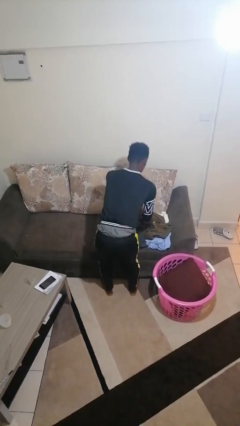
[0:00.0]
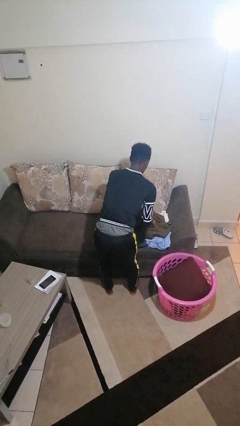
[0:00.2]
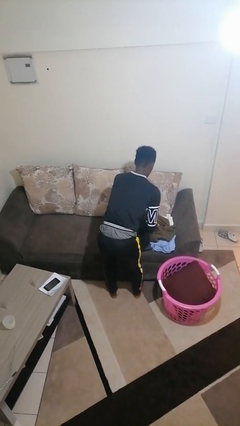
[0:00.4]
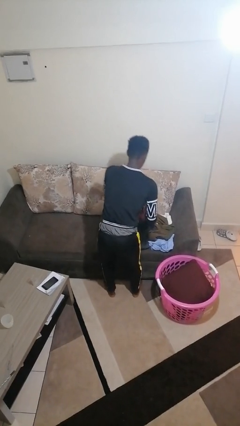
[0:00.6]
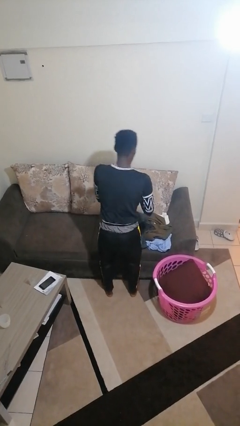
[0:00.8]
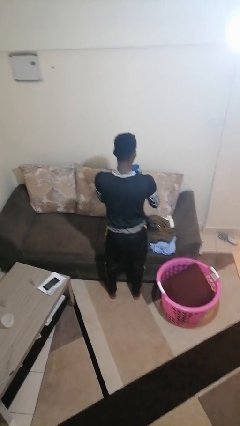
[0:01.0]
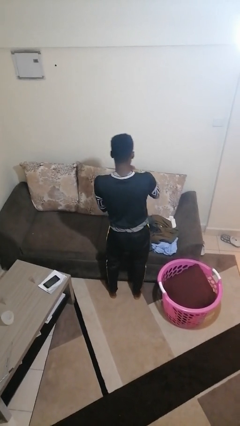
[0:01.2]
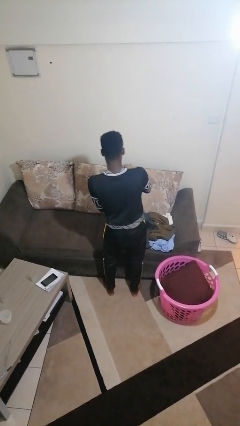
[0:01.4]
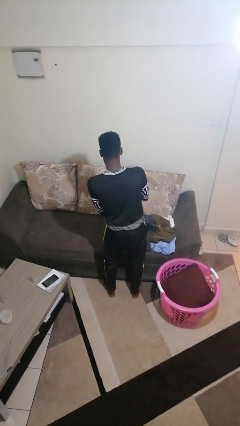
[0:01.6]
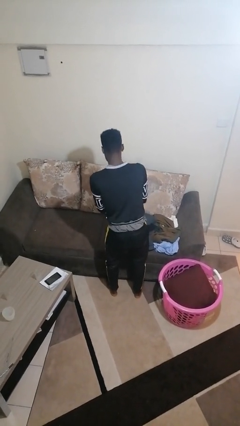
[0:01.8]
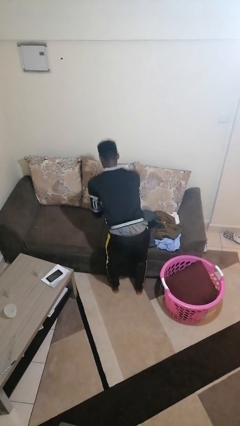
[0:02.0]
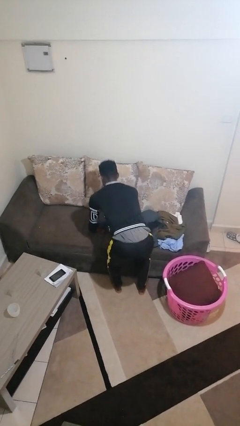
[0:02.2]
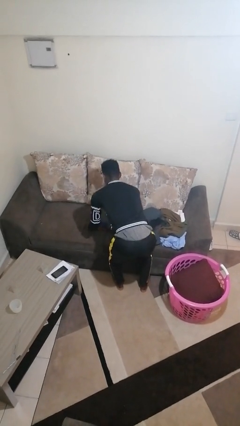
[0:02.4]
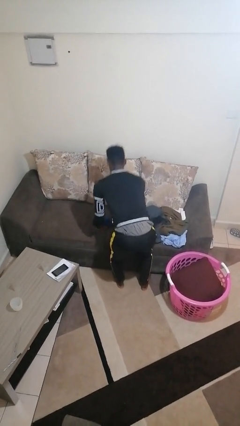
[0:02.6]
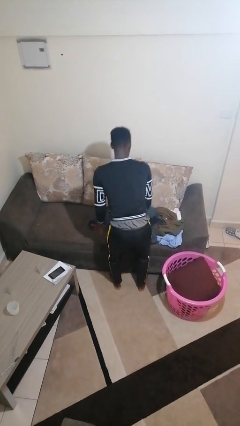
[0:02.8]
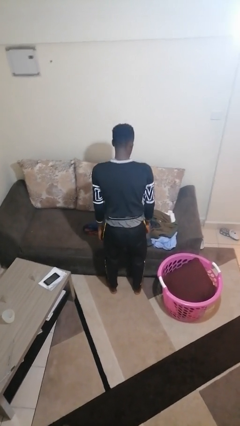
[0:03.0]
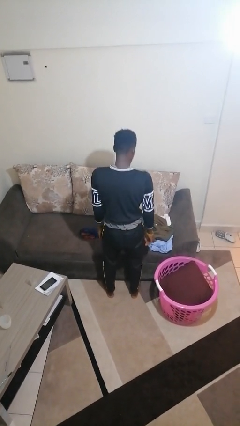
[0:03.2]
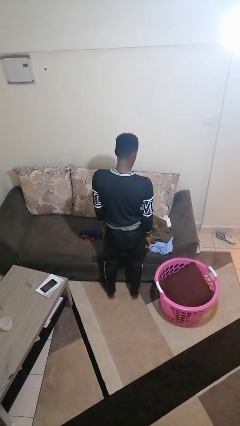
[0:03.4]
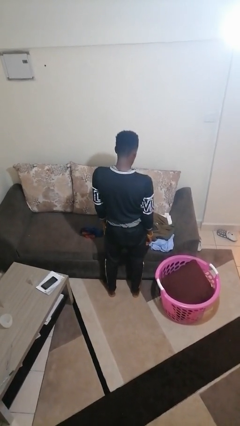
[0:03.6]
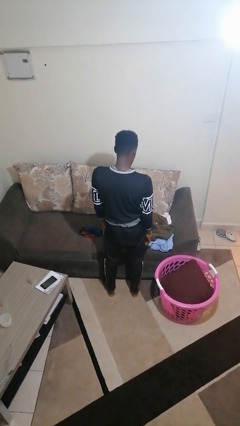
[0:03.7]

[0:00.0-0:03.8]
person folds socks

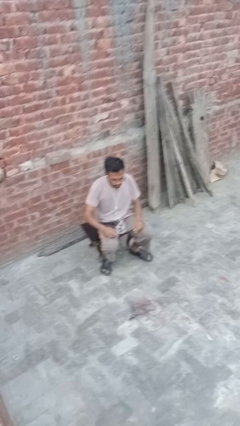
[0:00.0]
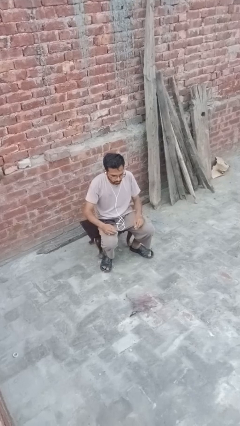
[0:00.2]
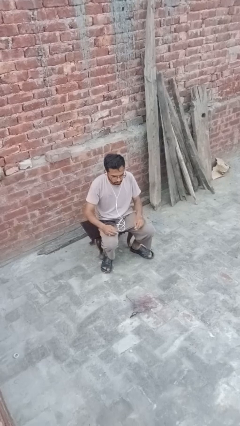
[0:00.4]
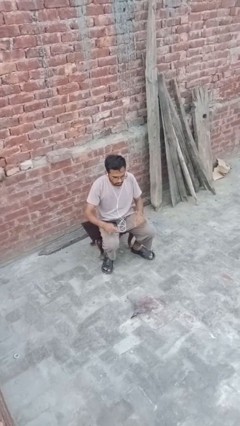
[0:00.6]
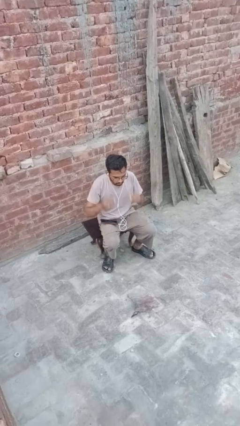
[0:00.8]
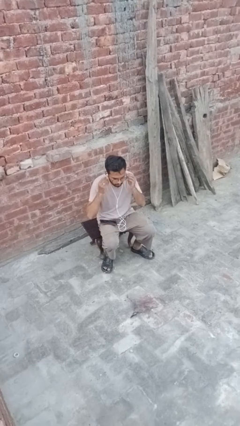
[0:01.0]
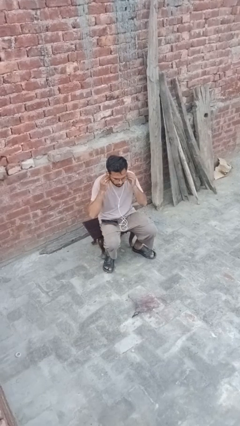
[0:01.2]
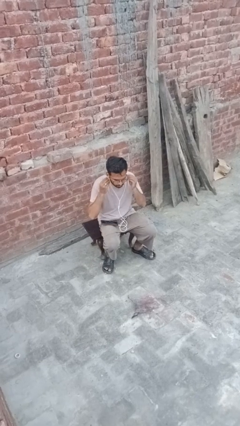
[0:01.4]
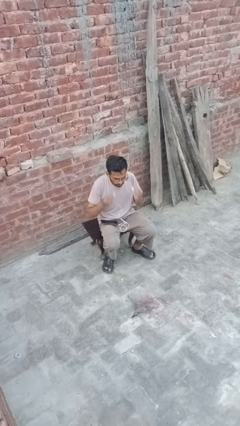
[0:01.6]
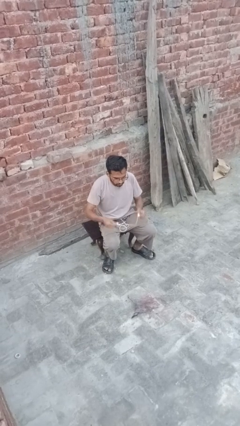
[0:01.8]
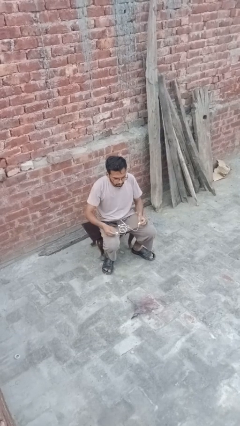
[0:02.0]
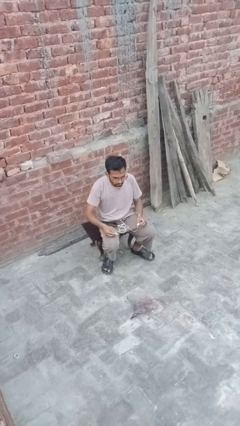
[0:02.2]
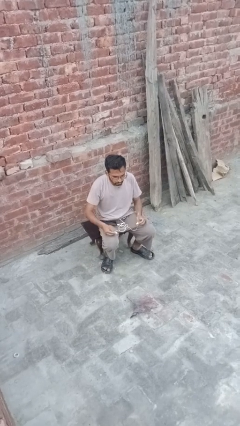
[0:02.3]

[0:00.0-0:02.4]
person takes off headphones

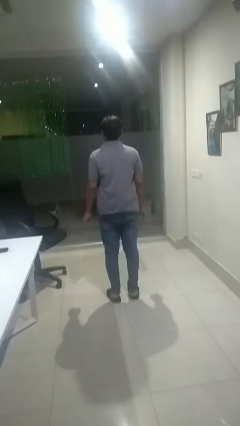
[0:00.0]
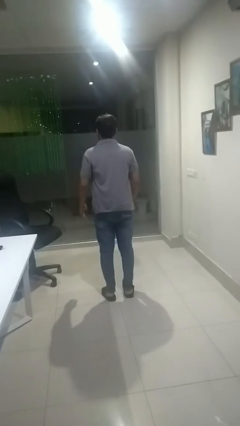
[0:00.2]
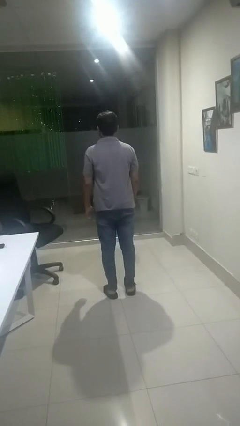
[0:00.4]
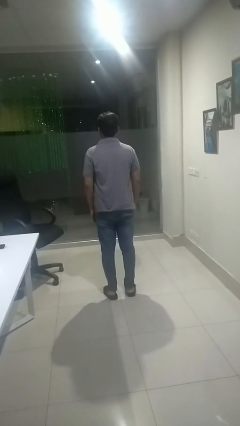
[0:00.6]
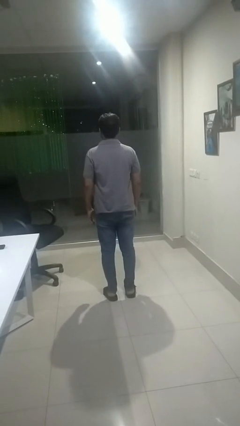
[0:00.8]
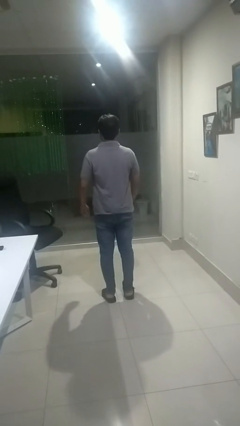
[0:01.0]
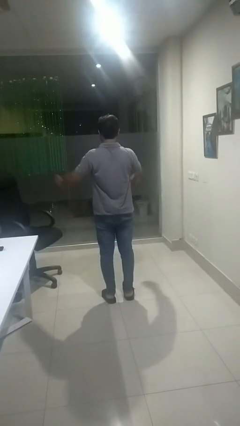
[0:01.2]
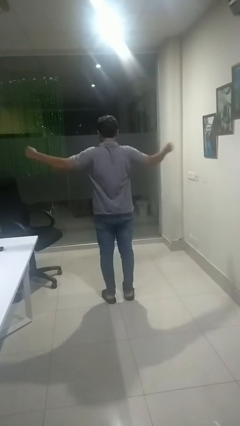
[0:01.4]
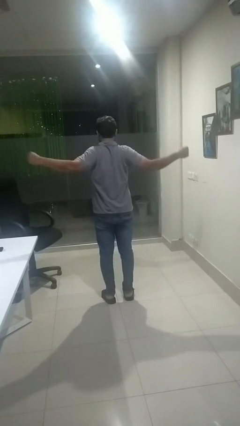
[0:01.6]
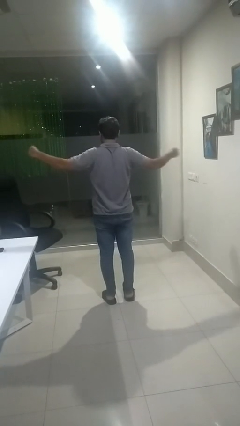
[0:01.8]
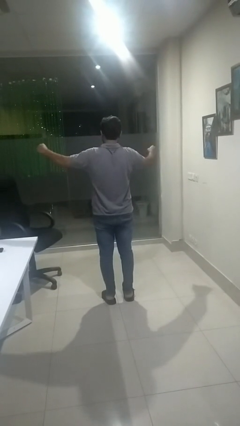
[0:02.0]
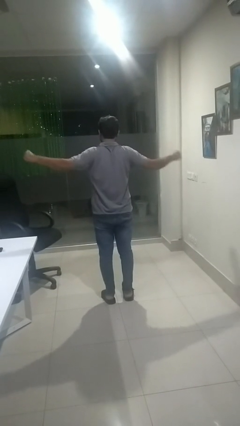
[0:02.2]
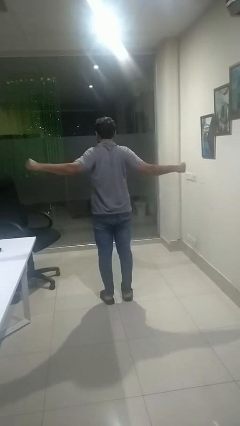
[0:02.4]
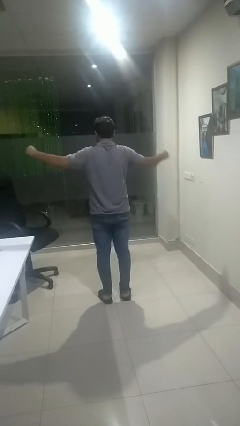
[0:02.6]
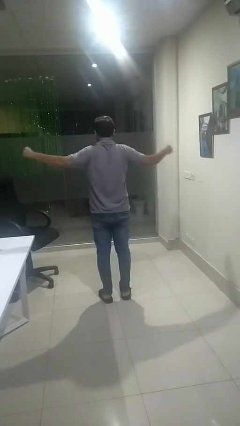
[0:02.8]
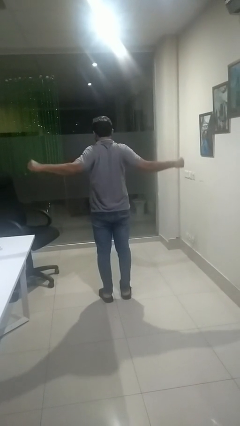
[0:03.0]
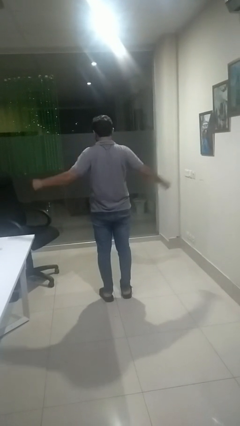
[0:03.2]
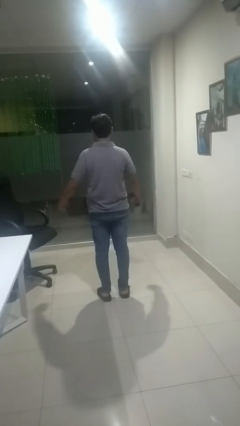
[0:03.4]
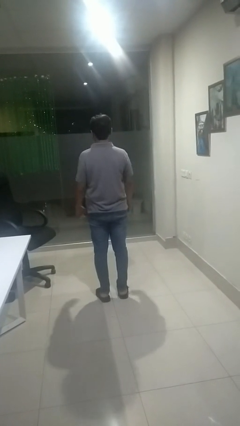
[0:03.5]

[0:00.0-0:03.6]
person stretches arms to side

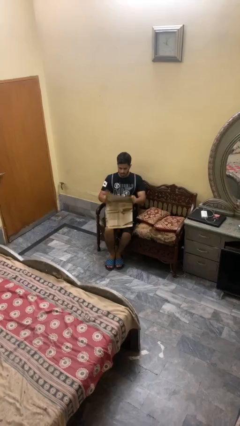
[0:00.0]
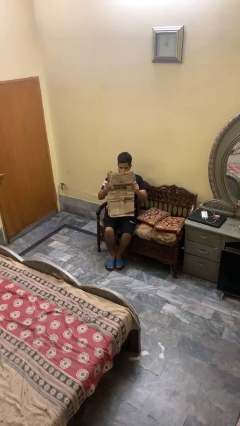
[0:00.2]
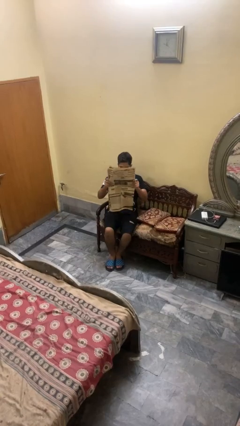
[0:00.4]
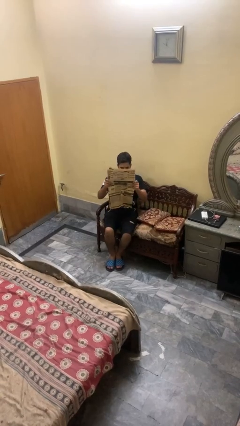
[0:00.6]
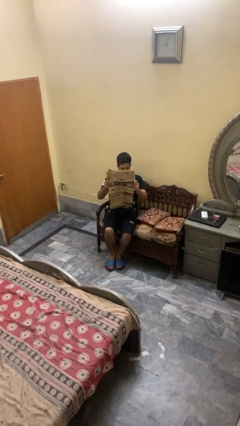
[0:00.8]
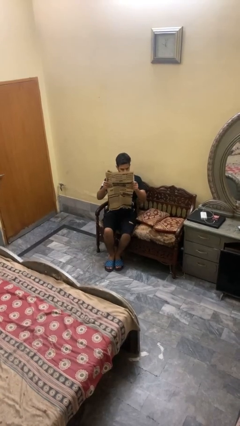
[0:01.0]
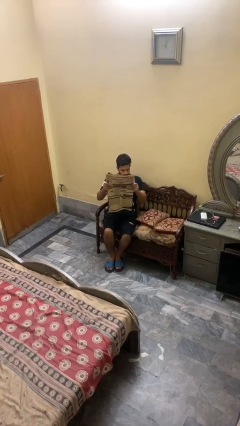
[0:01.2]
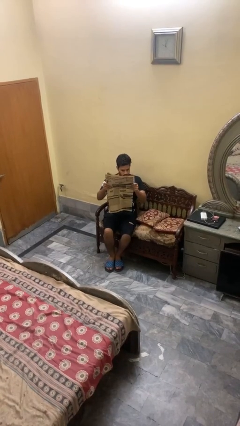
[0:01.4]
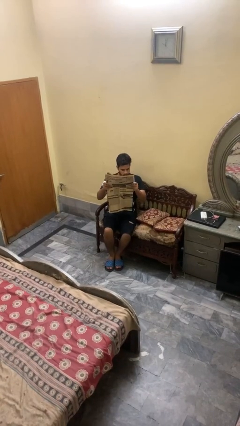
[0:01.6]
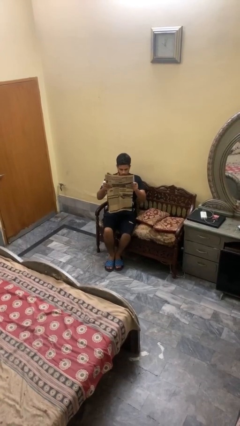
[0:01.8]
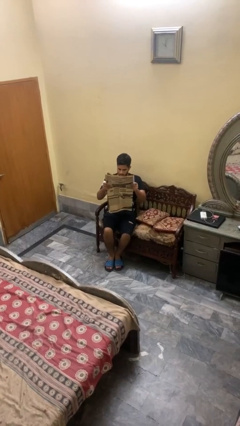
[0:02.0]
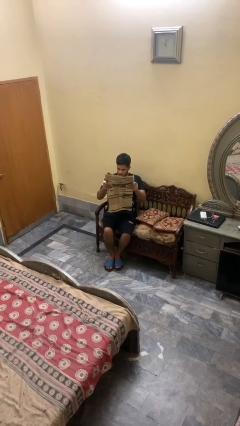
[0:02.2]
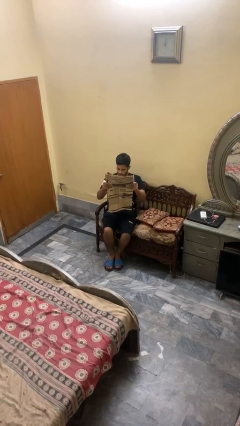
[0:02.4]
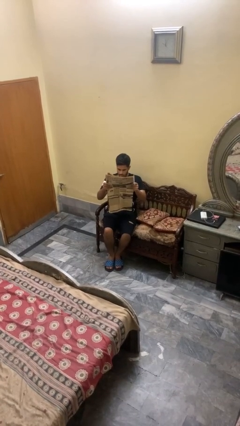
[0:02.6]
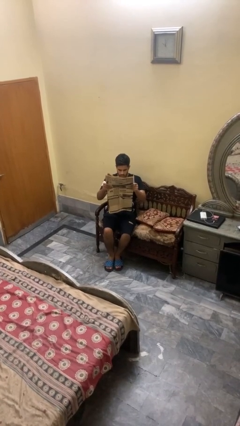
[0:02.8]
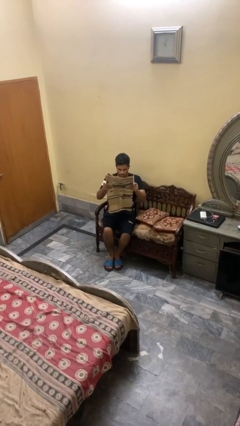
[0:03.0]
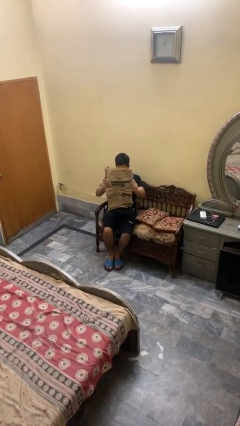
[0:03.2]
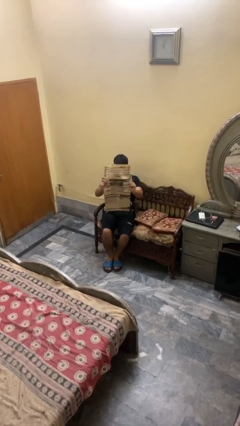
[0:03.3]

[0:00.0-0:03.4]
person reads newspaper

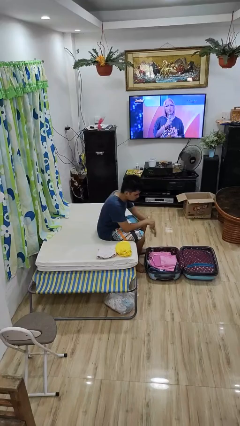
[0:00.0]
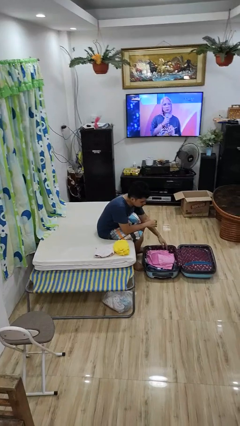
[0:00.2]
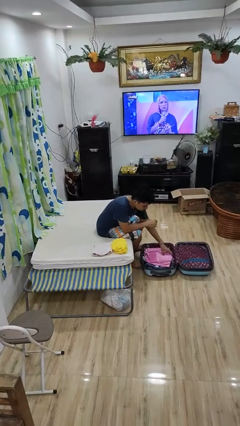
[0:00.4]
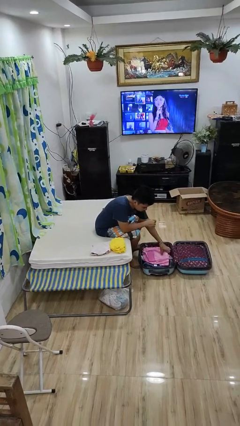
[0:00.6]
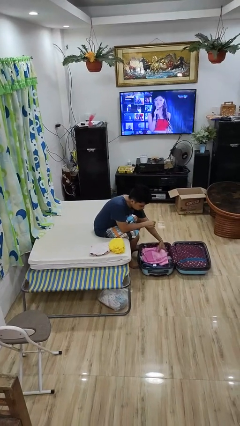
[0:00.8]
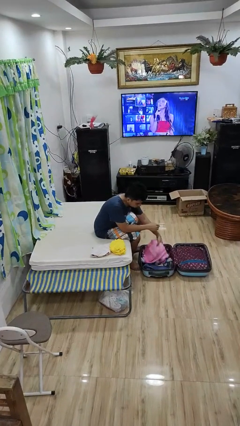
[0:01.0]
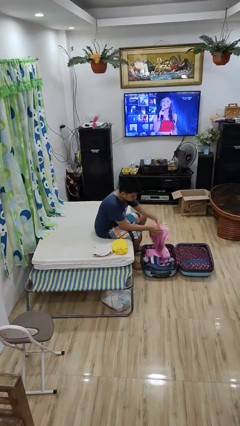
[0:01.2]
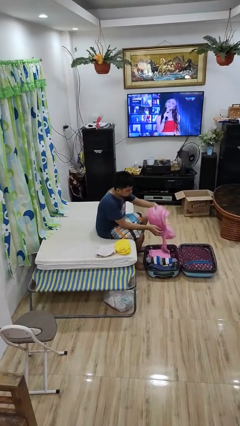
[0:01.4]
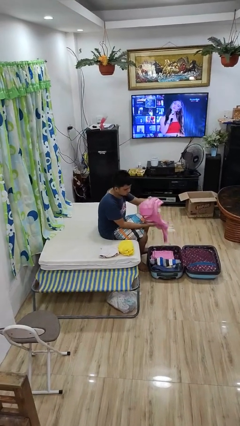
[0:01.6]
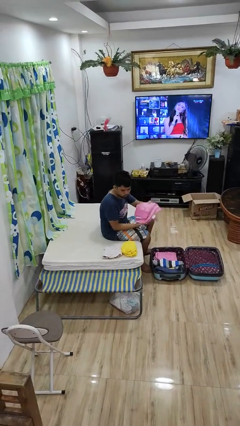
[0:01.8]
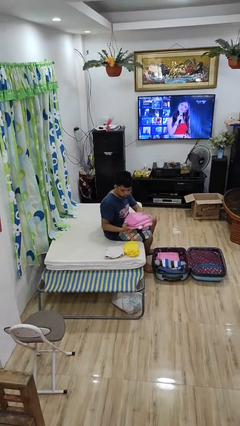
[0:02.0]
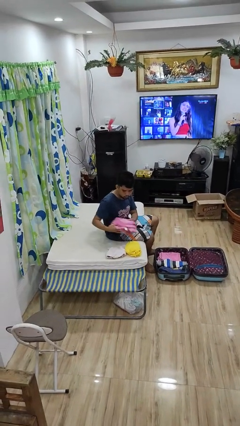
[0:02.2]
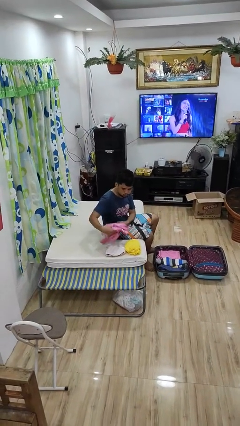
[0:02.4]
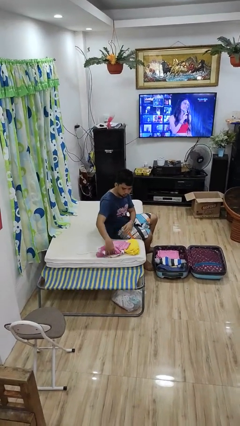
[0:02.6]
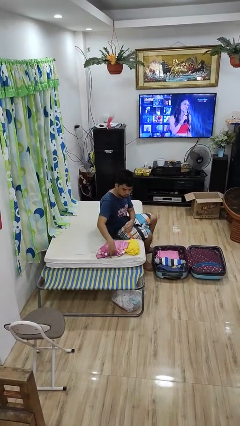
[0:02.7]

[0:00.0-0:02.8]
person unloads clothes from suitcase

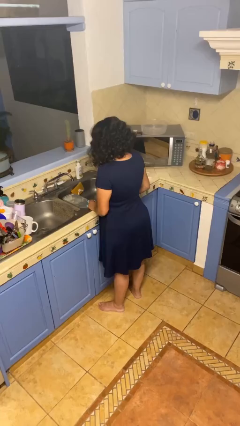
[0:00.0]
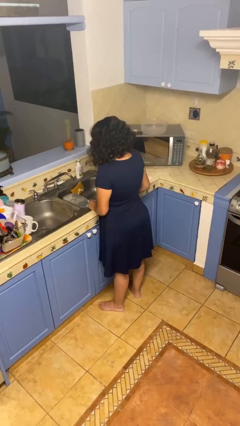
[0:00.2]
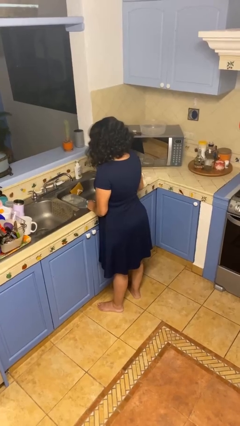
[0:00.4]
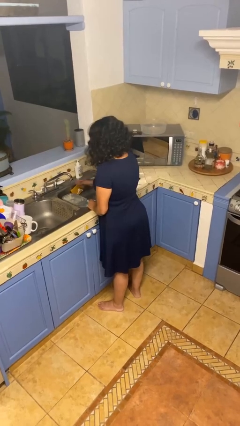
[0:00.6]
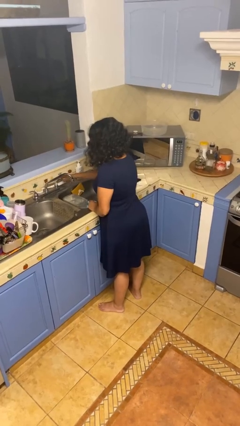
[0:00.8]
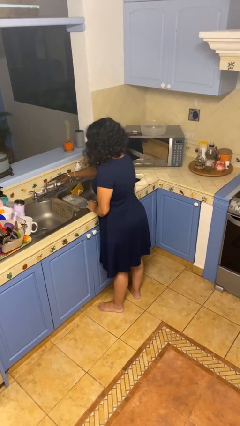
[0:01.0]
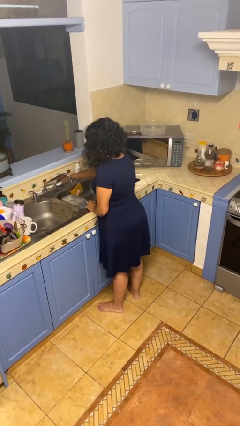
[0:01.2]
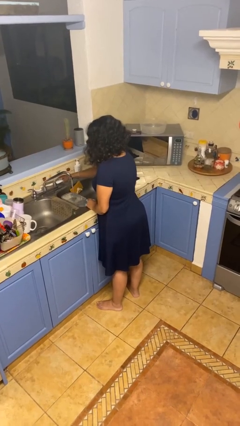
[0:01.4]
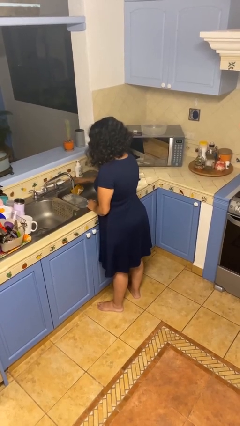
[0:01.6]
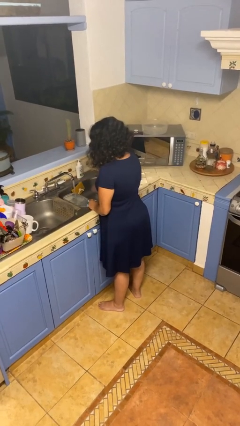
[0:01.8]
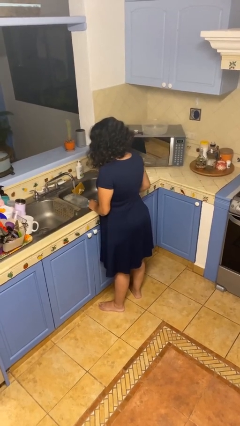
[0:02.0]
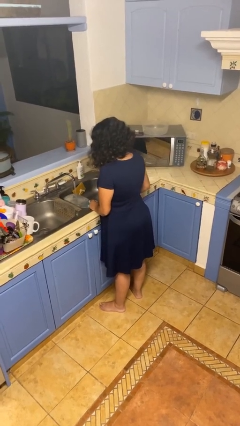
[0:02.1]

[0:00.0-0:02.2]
person turns on faucet
